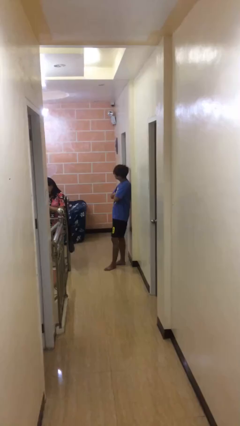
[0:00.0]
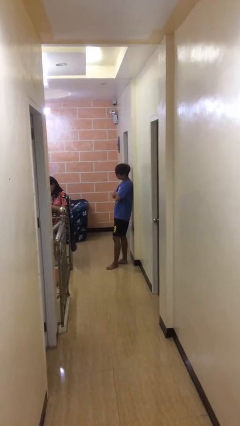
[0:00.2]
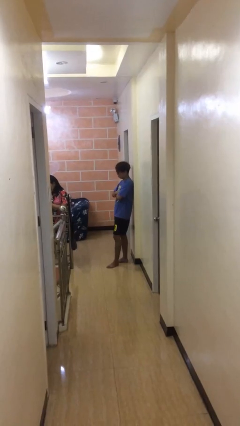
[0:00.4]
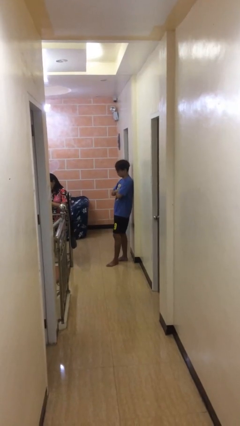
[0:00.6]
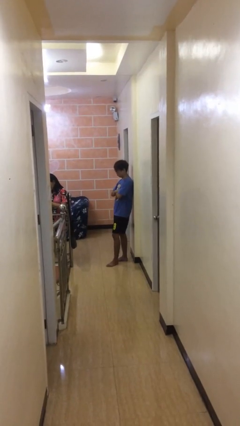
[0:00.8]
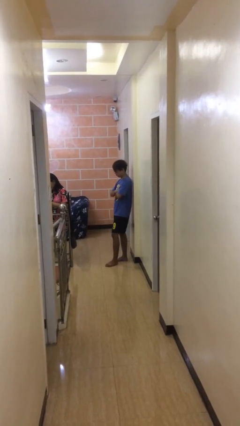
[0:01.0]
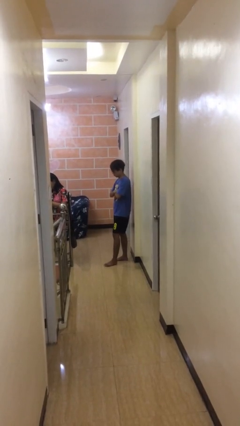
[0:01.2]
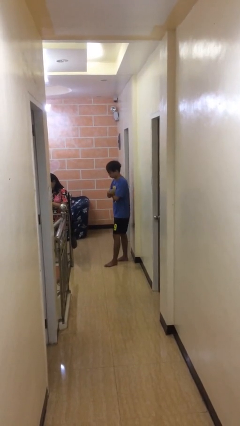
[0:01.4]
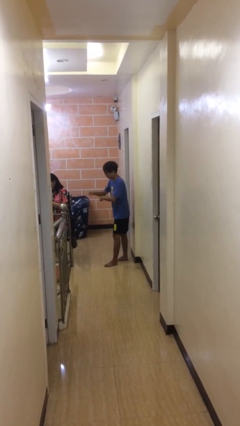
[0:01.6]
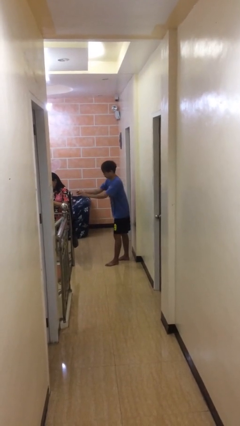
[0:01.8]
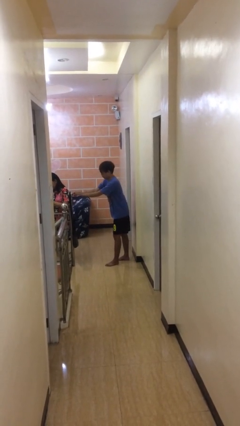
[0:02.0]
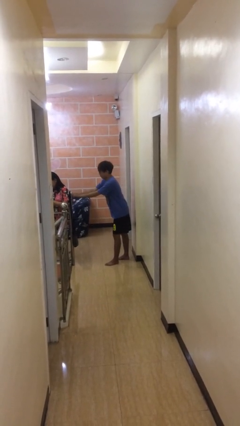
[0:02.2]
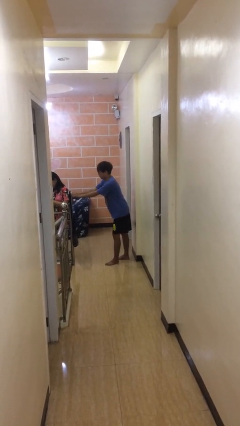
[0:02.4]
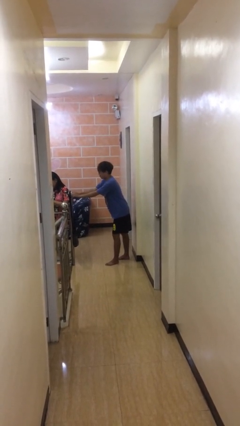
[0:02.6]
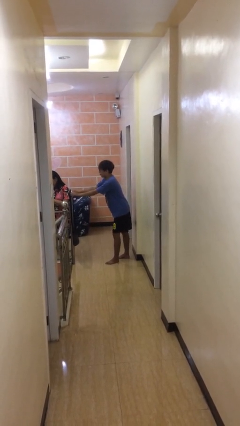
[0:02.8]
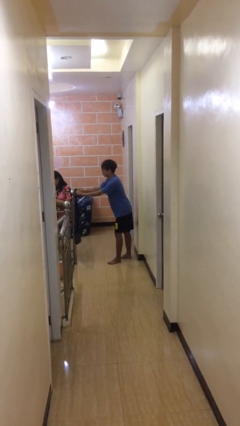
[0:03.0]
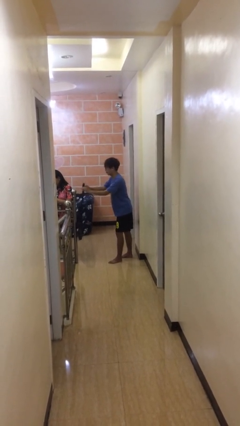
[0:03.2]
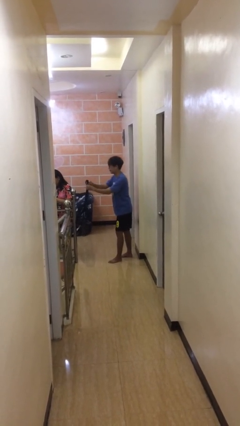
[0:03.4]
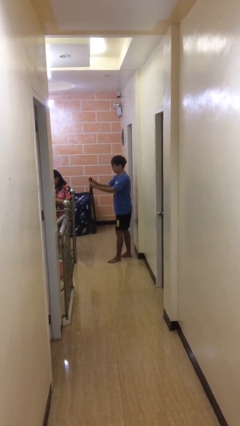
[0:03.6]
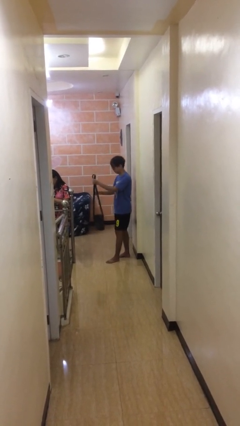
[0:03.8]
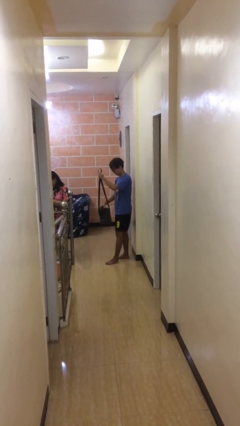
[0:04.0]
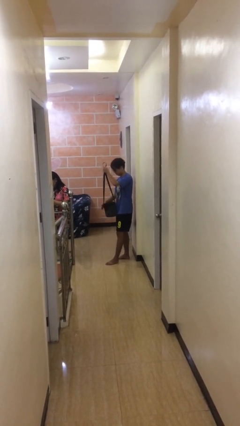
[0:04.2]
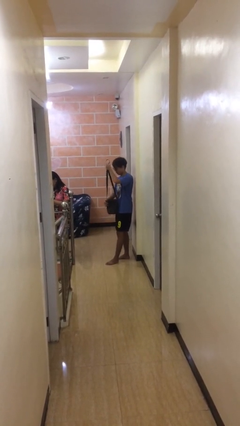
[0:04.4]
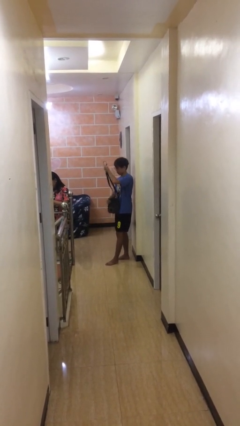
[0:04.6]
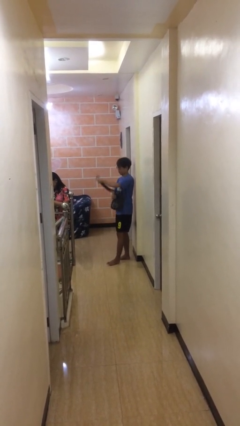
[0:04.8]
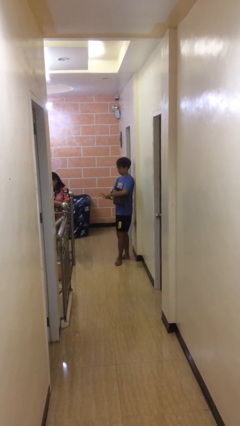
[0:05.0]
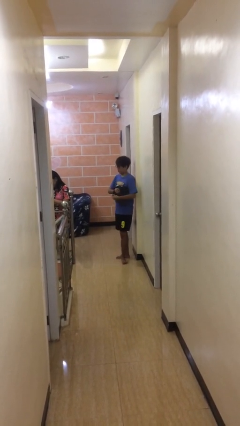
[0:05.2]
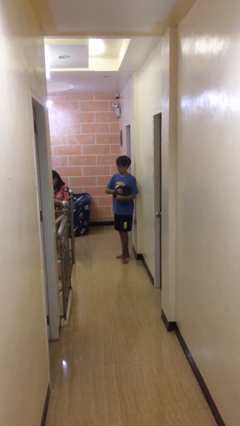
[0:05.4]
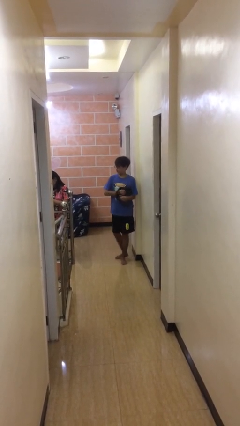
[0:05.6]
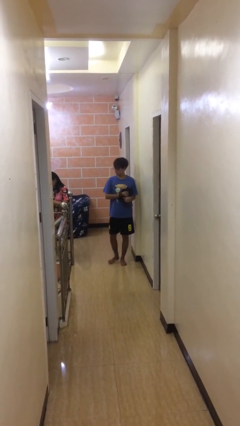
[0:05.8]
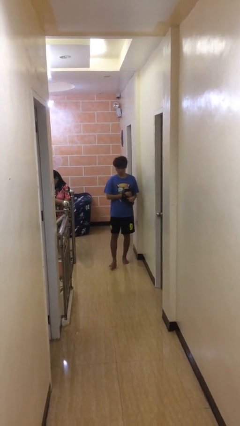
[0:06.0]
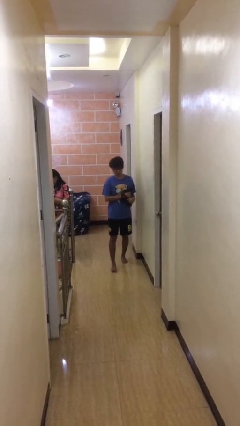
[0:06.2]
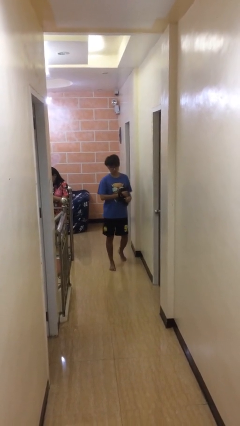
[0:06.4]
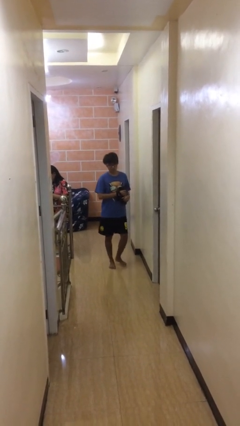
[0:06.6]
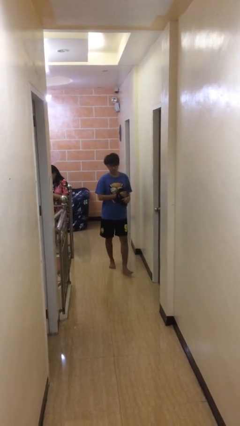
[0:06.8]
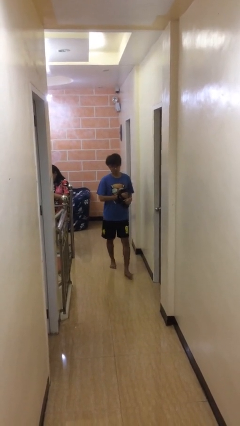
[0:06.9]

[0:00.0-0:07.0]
person steals object from person

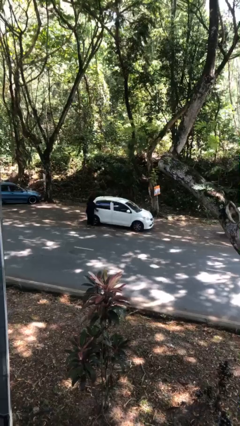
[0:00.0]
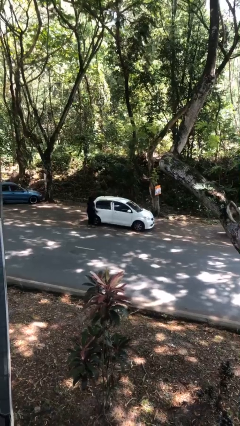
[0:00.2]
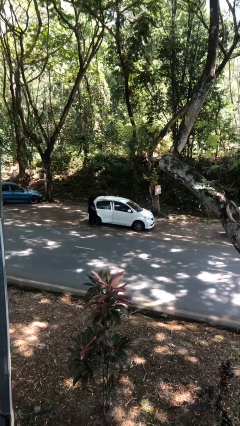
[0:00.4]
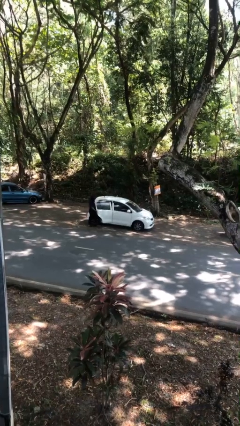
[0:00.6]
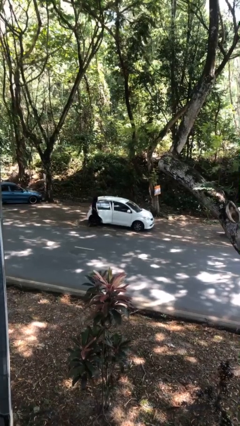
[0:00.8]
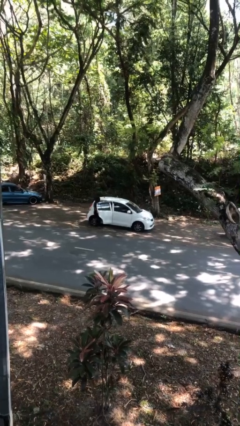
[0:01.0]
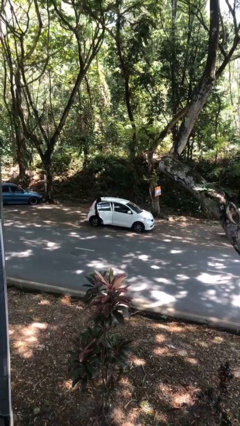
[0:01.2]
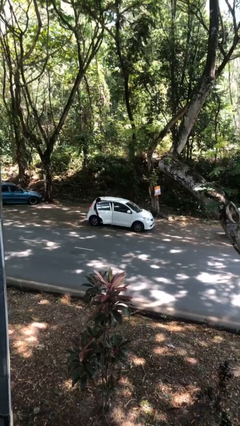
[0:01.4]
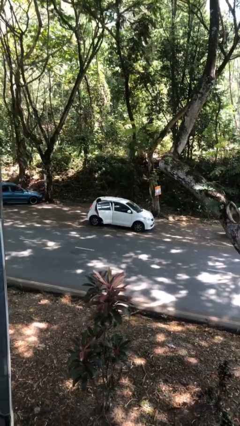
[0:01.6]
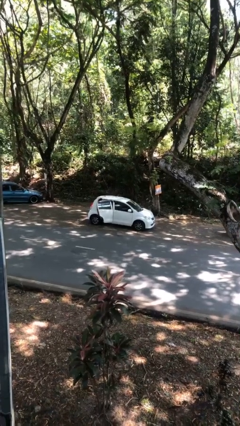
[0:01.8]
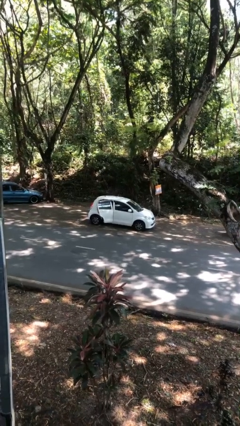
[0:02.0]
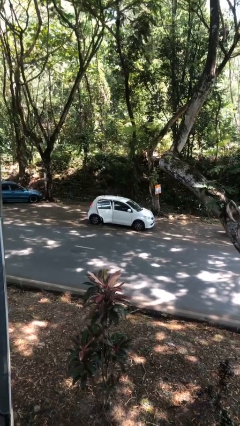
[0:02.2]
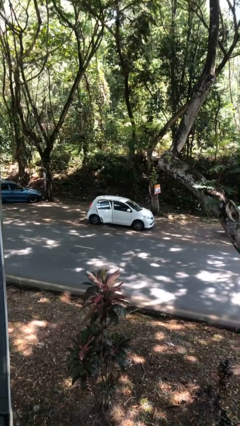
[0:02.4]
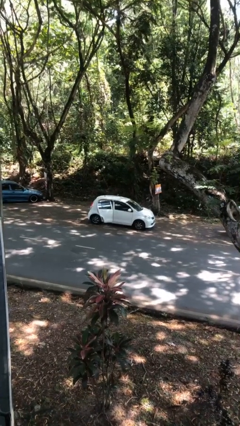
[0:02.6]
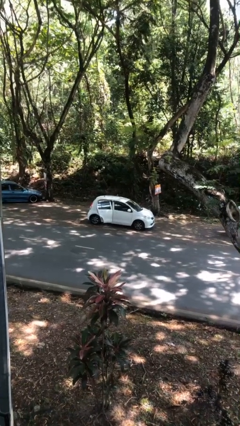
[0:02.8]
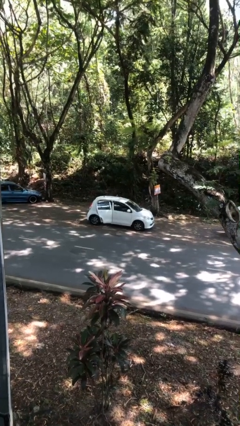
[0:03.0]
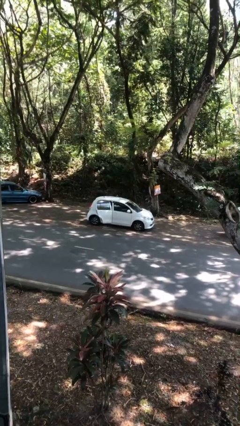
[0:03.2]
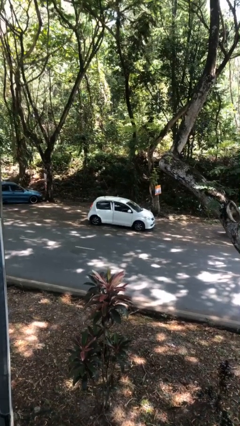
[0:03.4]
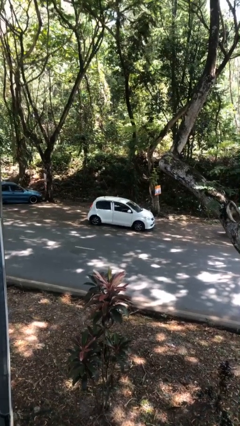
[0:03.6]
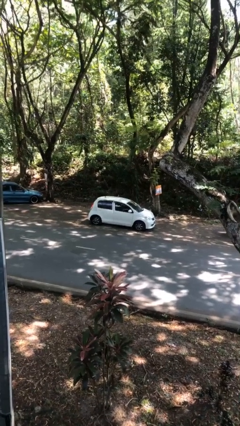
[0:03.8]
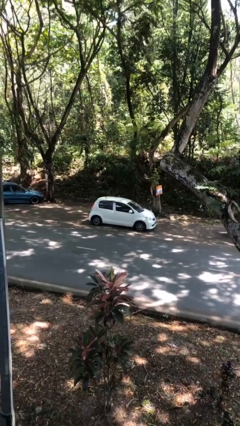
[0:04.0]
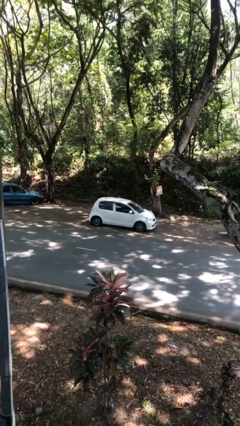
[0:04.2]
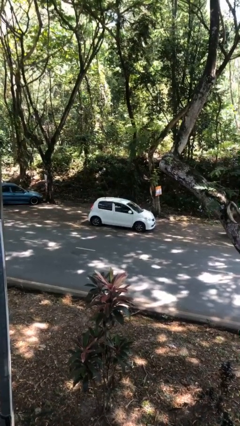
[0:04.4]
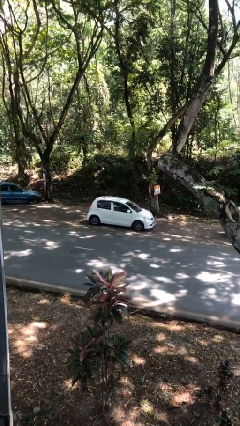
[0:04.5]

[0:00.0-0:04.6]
car picks up person

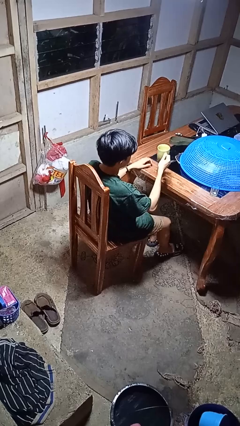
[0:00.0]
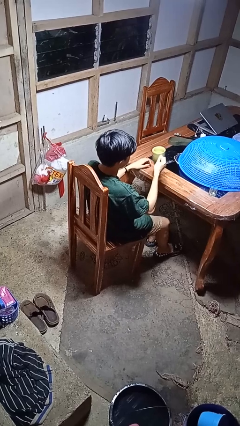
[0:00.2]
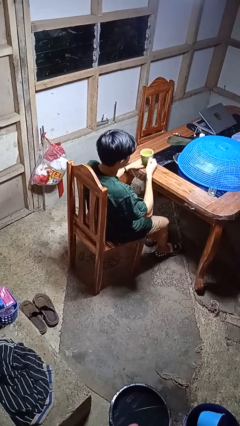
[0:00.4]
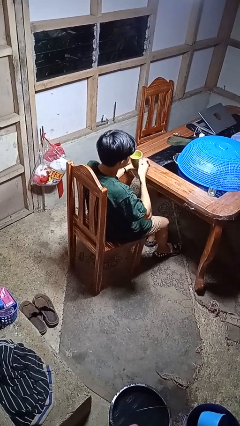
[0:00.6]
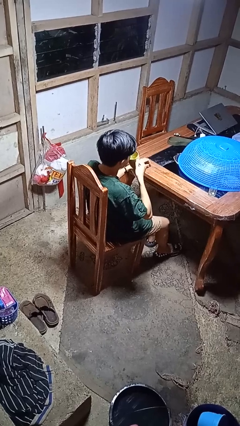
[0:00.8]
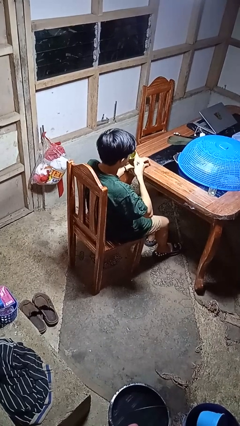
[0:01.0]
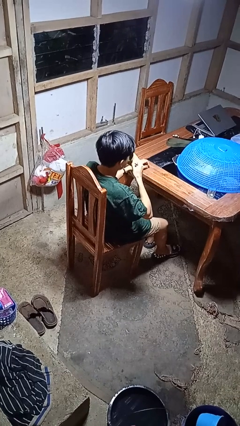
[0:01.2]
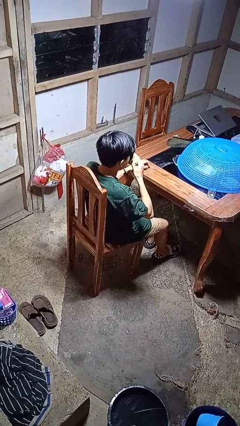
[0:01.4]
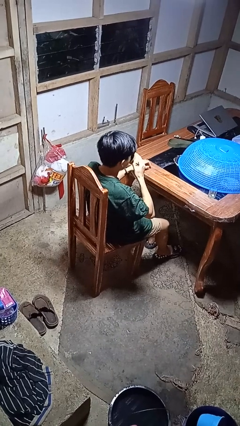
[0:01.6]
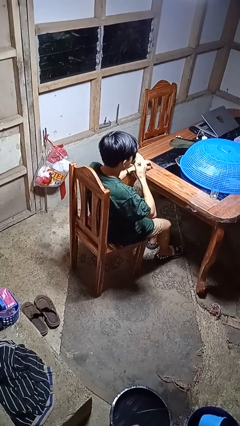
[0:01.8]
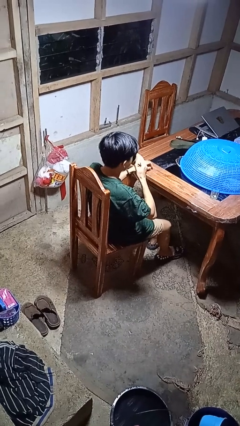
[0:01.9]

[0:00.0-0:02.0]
person drinks from mug

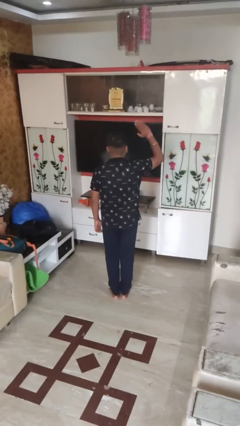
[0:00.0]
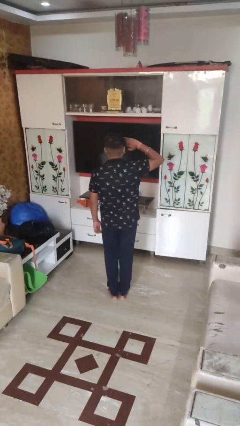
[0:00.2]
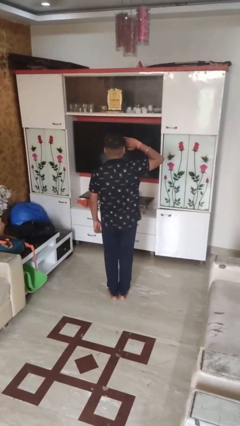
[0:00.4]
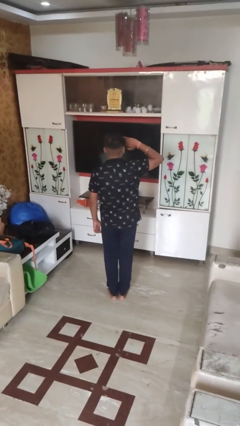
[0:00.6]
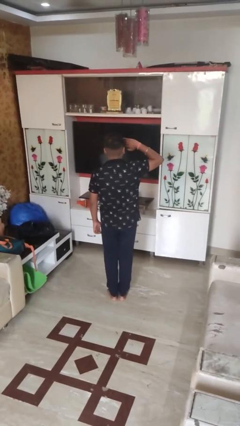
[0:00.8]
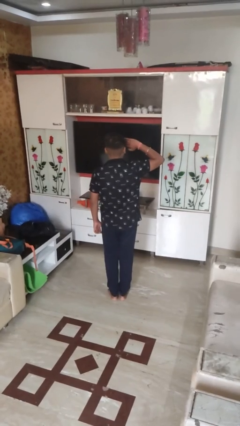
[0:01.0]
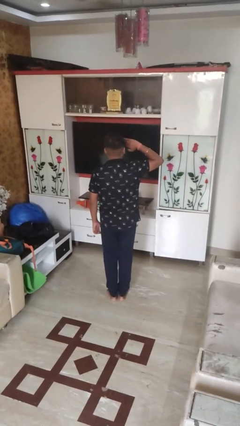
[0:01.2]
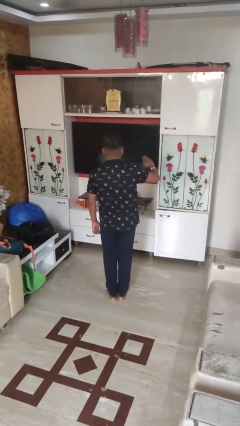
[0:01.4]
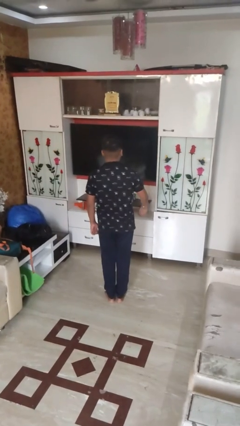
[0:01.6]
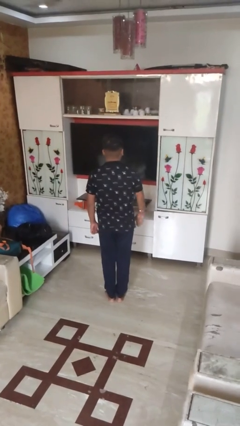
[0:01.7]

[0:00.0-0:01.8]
person salutes

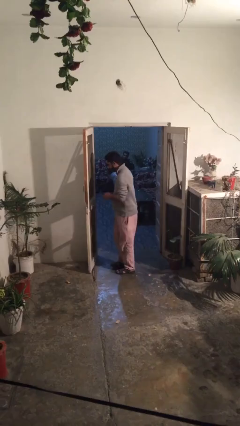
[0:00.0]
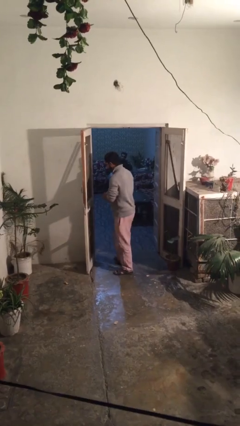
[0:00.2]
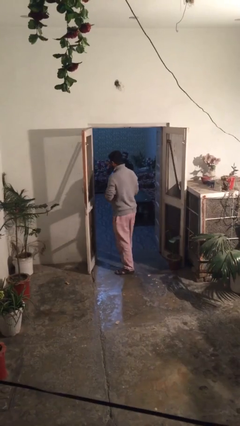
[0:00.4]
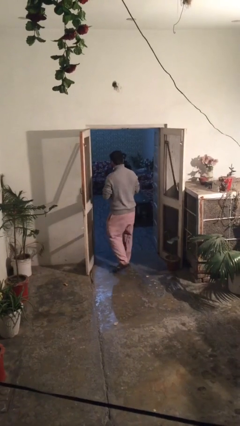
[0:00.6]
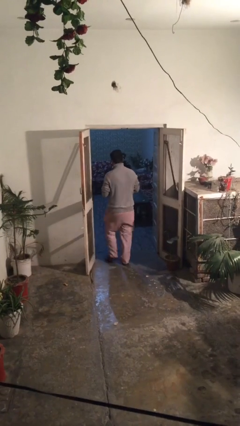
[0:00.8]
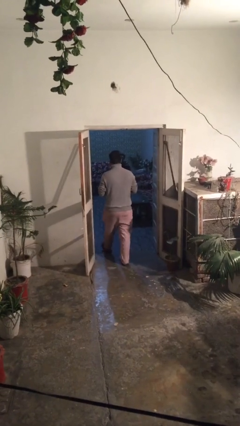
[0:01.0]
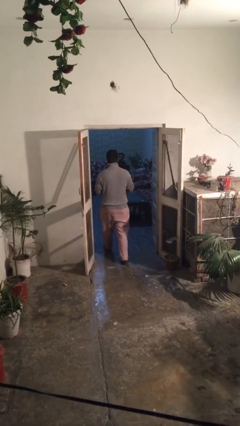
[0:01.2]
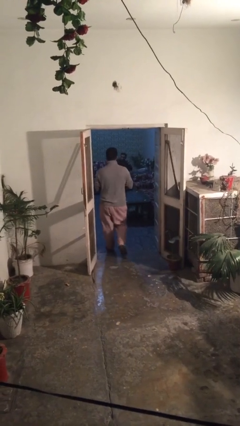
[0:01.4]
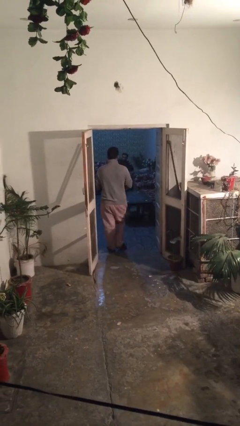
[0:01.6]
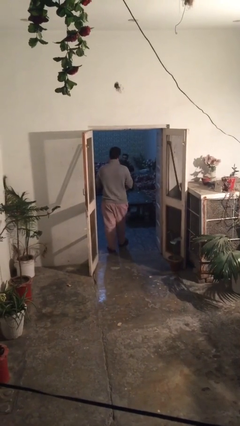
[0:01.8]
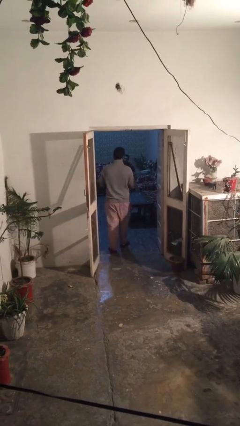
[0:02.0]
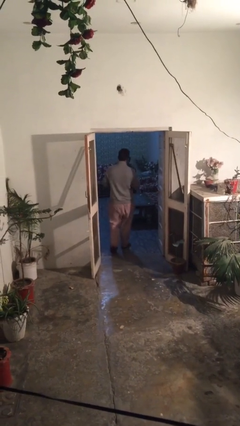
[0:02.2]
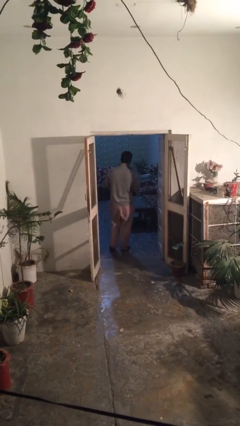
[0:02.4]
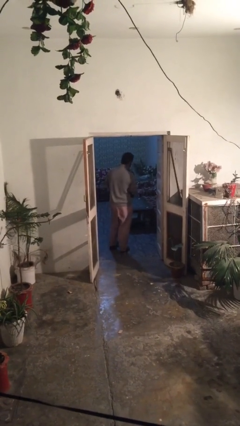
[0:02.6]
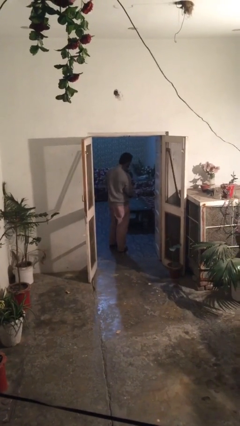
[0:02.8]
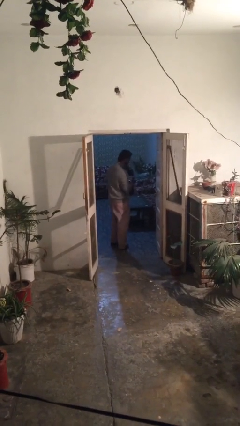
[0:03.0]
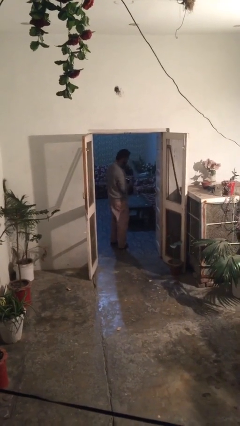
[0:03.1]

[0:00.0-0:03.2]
person exits scene through structure
